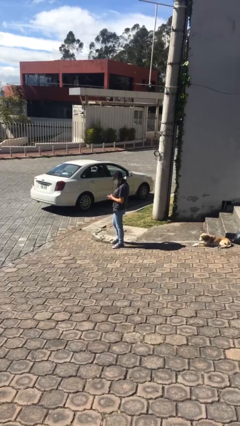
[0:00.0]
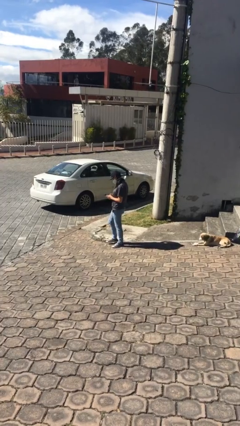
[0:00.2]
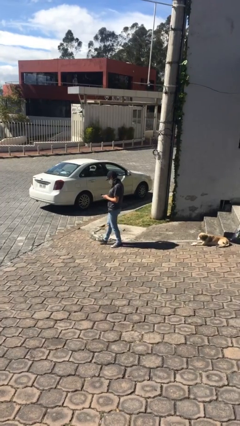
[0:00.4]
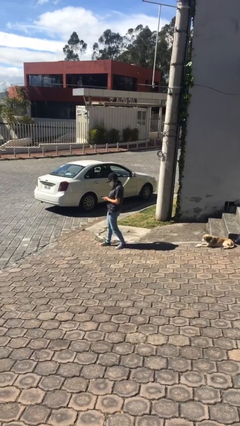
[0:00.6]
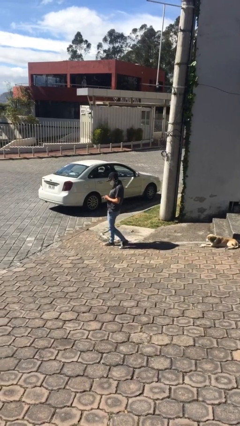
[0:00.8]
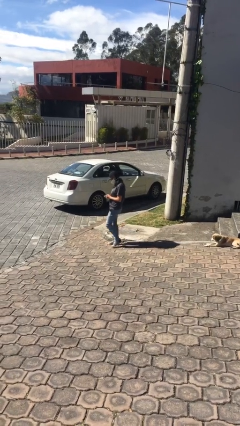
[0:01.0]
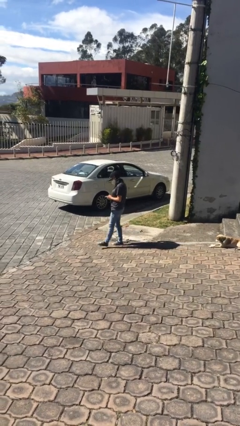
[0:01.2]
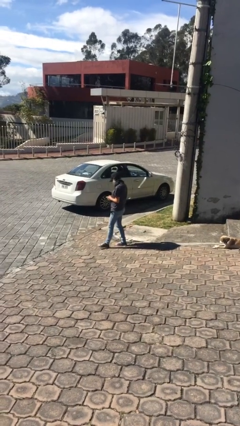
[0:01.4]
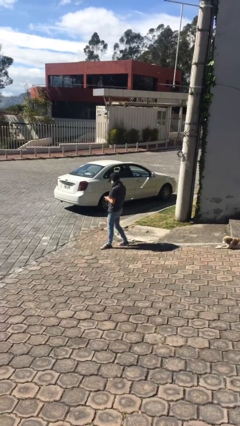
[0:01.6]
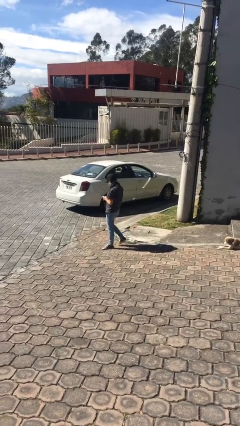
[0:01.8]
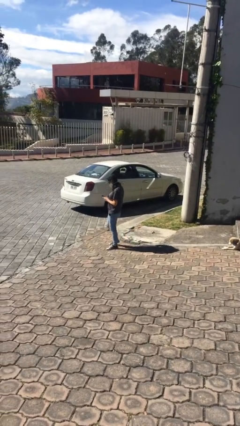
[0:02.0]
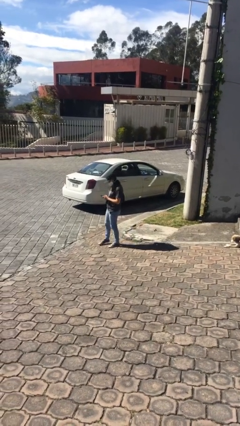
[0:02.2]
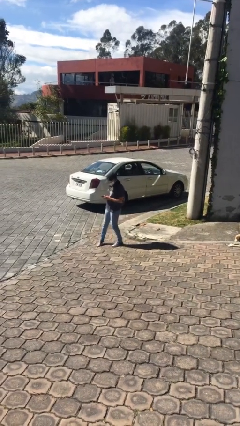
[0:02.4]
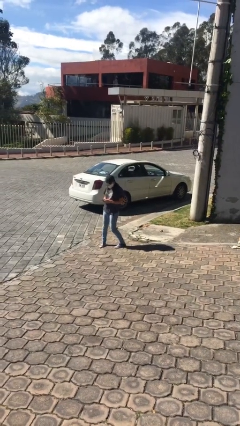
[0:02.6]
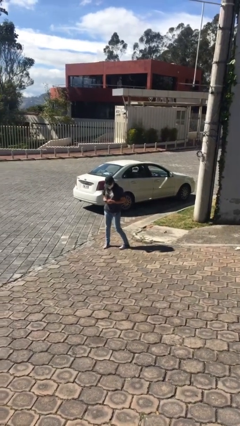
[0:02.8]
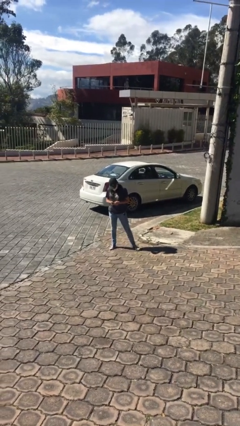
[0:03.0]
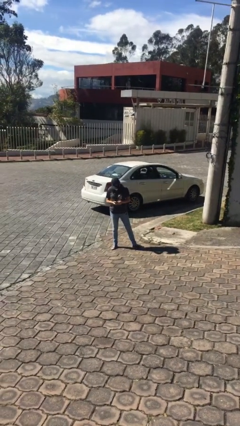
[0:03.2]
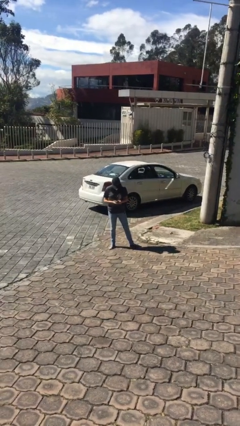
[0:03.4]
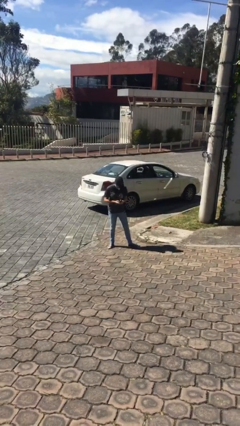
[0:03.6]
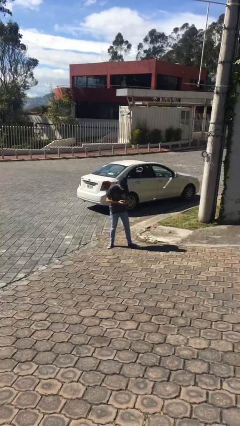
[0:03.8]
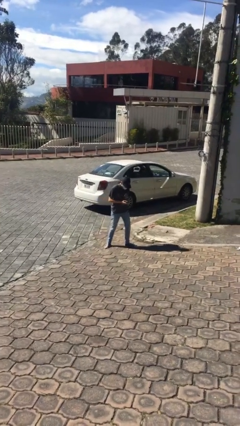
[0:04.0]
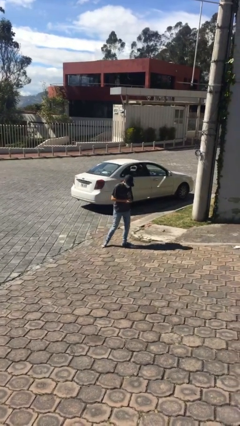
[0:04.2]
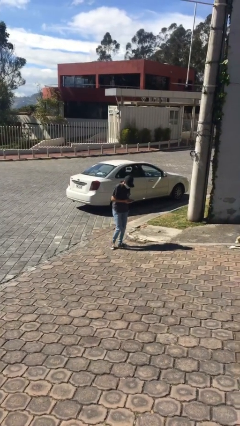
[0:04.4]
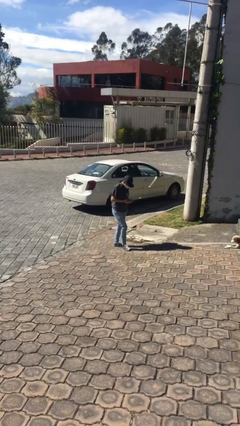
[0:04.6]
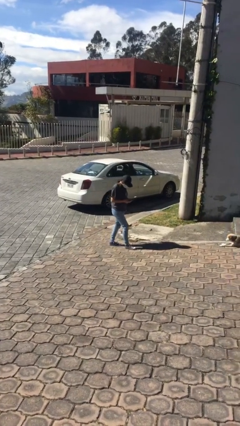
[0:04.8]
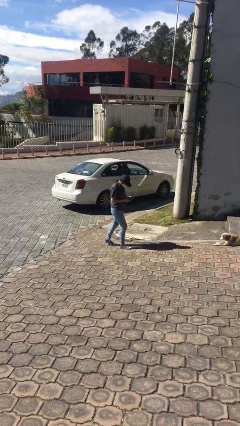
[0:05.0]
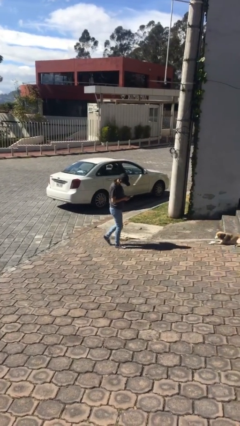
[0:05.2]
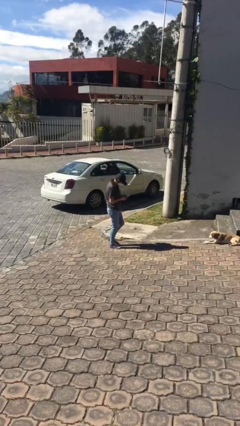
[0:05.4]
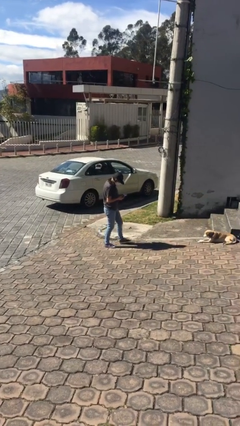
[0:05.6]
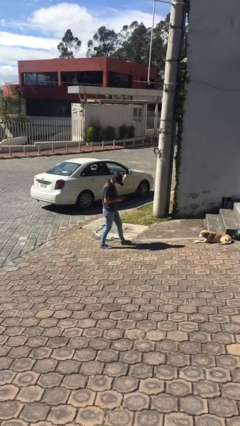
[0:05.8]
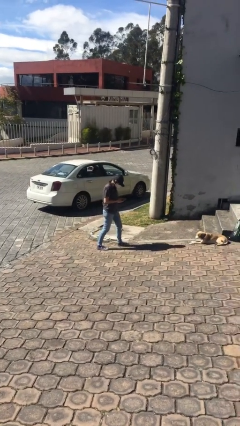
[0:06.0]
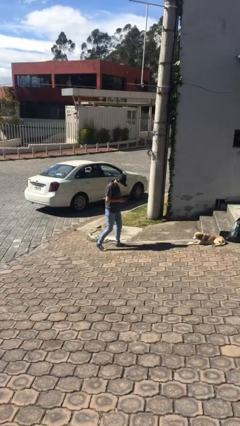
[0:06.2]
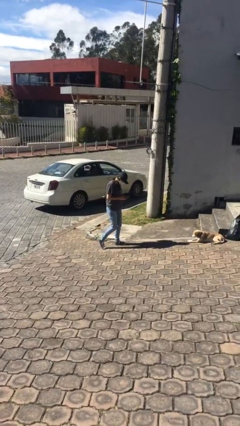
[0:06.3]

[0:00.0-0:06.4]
person texts on phone

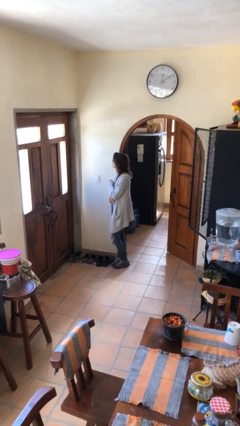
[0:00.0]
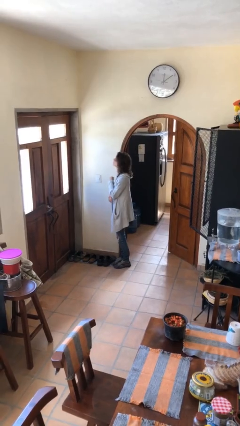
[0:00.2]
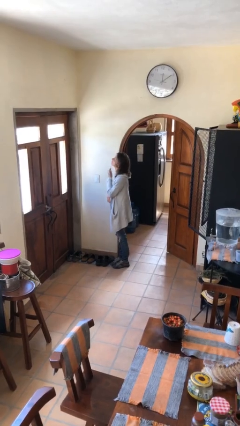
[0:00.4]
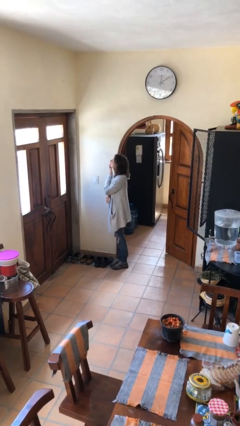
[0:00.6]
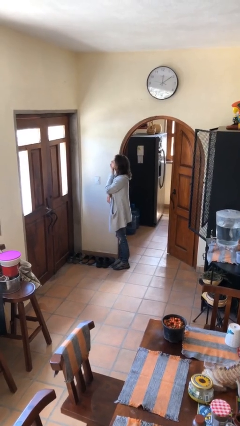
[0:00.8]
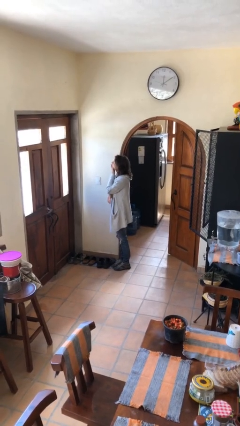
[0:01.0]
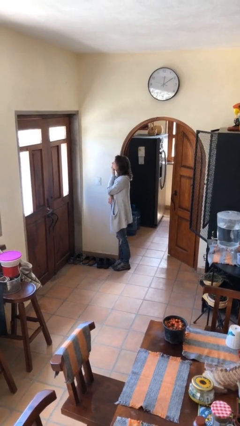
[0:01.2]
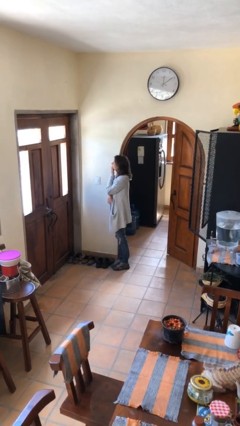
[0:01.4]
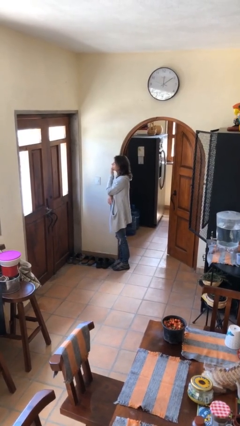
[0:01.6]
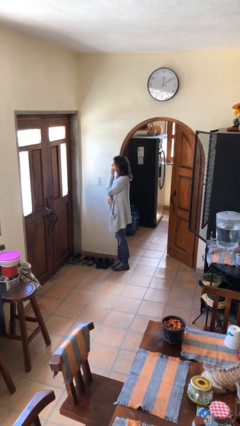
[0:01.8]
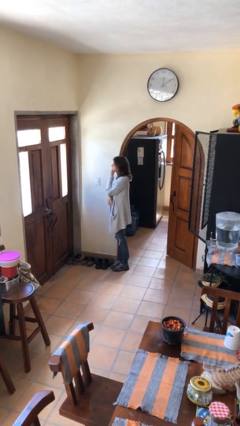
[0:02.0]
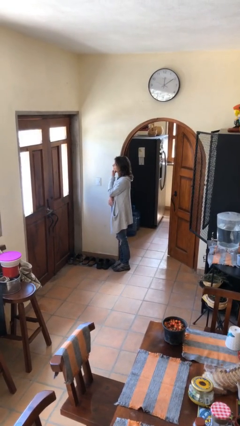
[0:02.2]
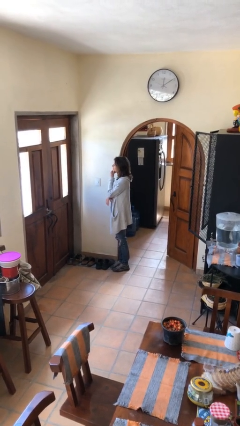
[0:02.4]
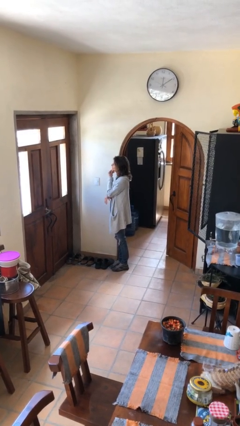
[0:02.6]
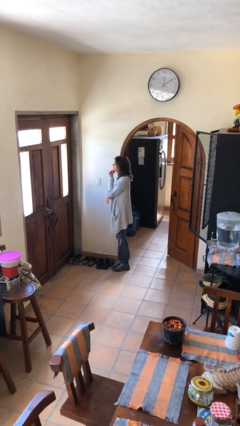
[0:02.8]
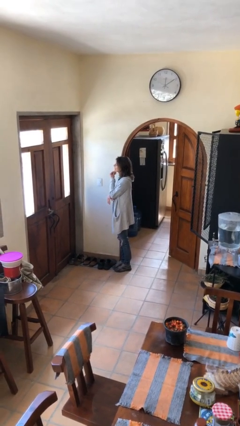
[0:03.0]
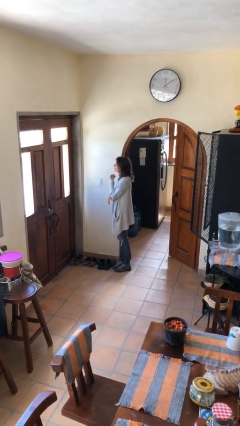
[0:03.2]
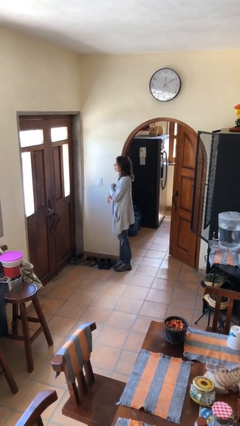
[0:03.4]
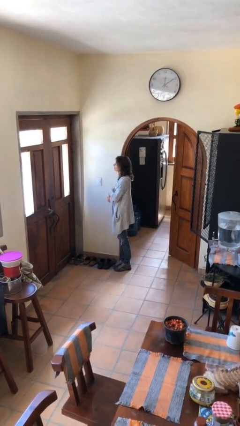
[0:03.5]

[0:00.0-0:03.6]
person strokes chin

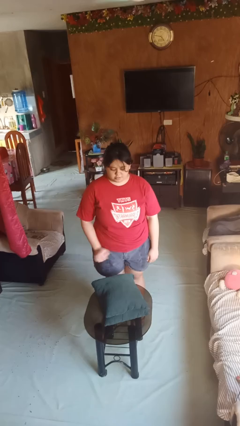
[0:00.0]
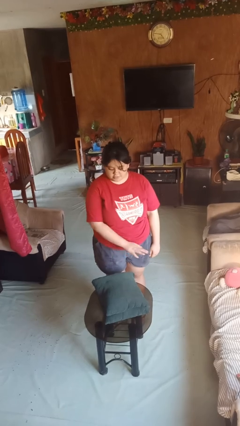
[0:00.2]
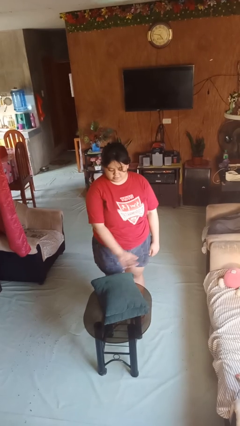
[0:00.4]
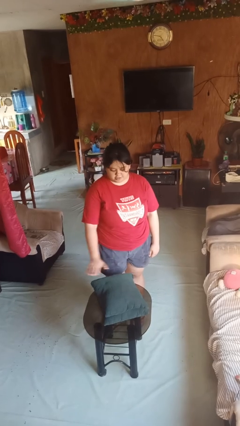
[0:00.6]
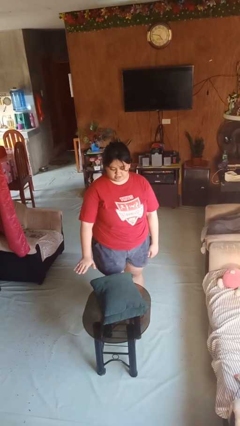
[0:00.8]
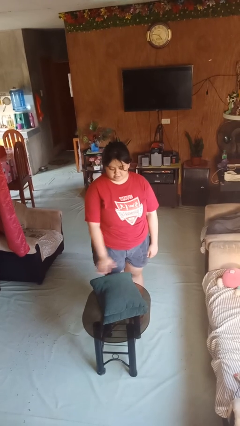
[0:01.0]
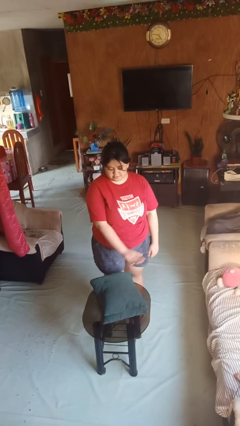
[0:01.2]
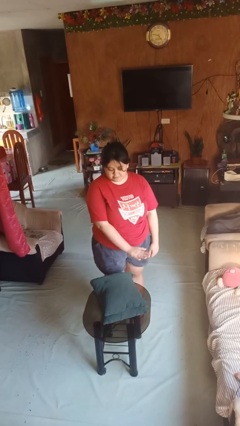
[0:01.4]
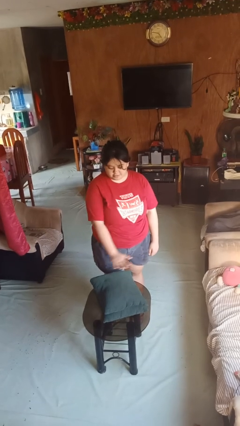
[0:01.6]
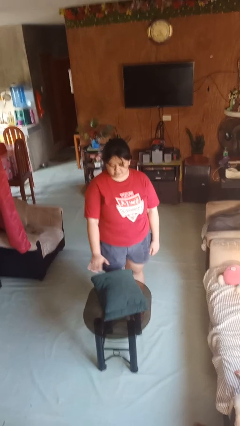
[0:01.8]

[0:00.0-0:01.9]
person waves hand over object

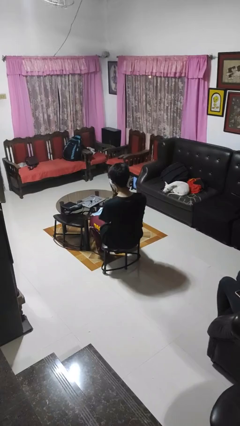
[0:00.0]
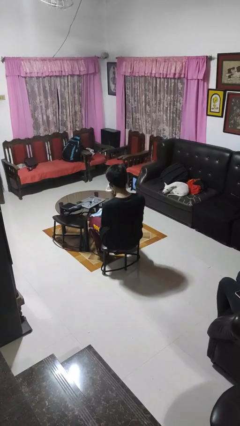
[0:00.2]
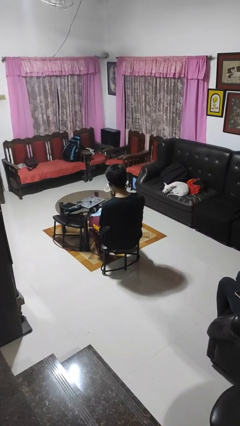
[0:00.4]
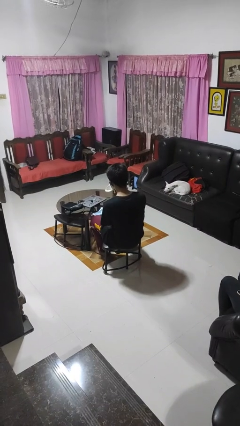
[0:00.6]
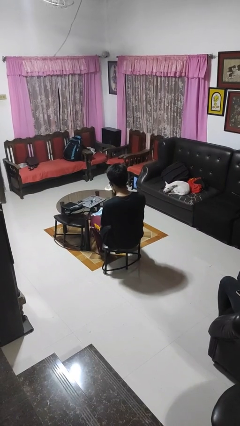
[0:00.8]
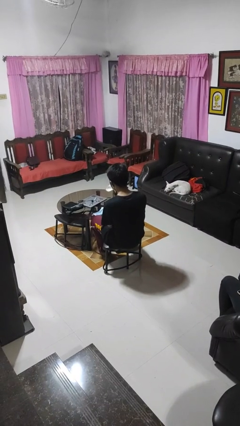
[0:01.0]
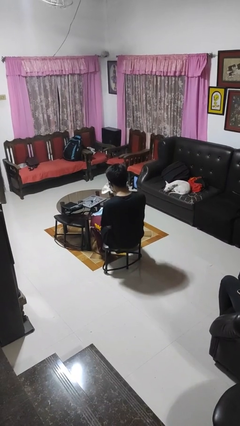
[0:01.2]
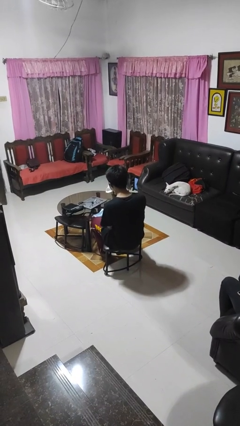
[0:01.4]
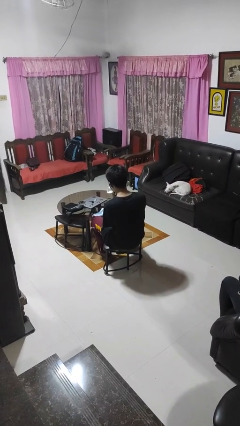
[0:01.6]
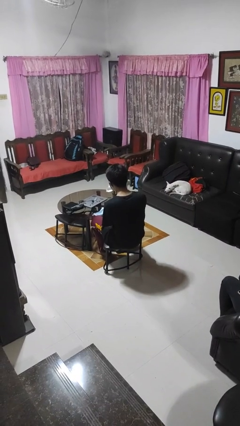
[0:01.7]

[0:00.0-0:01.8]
person wipes mouth with napkin

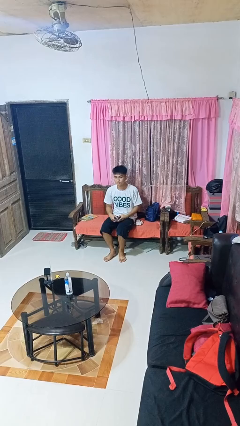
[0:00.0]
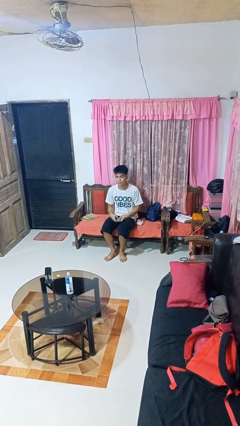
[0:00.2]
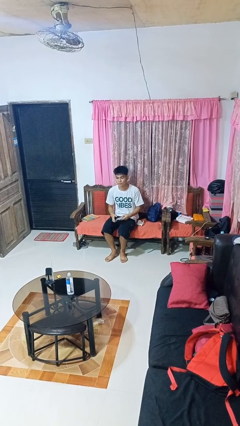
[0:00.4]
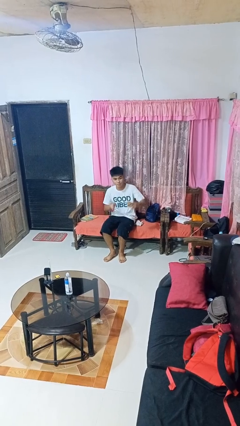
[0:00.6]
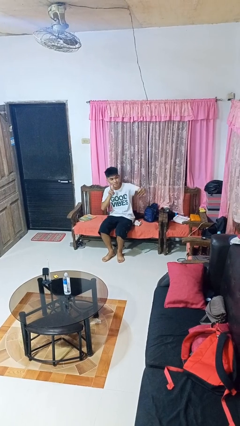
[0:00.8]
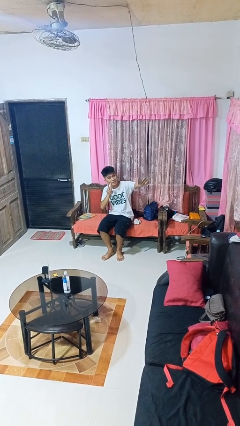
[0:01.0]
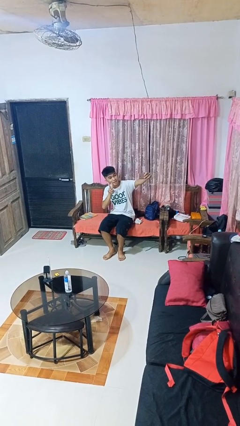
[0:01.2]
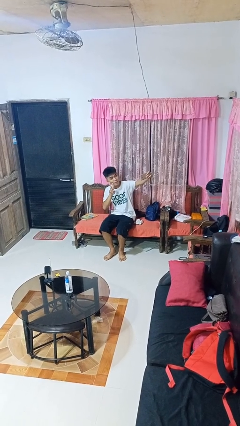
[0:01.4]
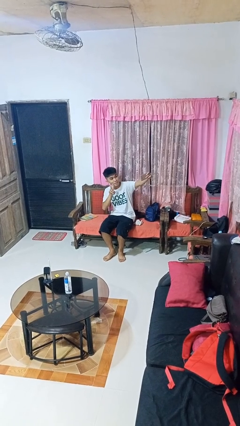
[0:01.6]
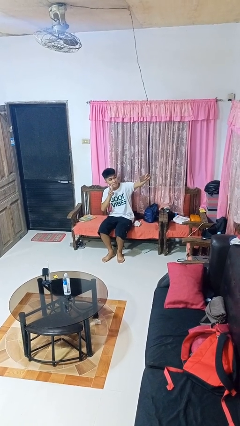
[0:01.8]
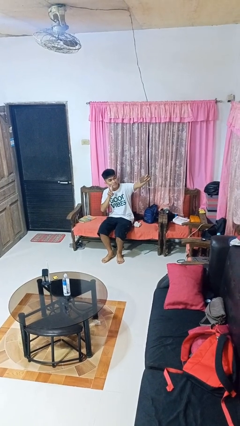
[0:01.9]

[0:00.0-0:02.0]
person takes selfie

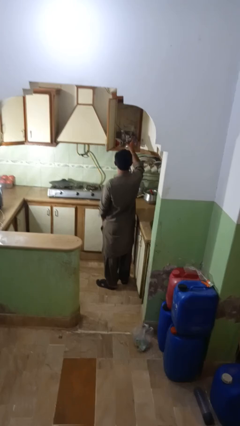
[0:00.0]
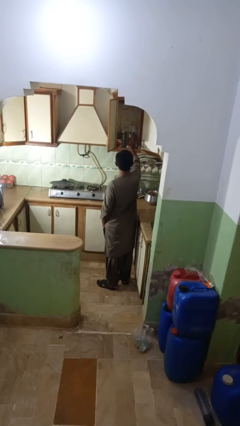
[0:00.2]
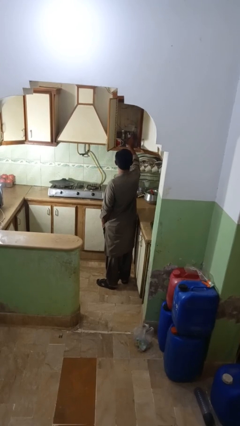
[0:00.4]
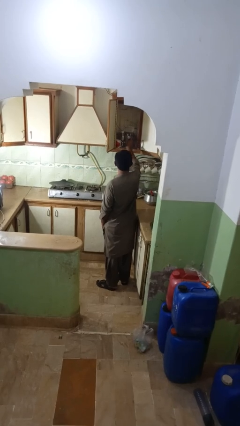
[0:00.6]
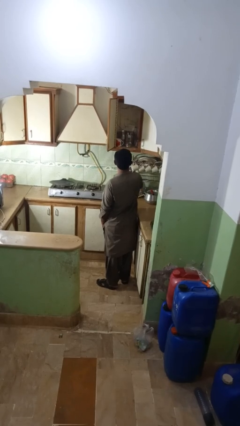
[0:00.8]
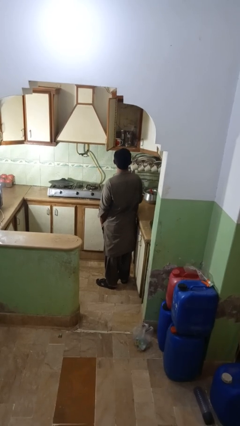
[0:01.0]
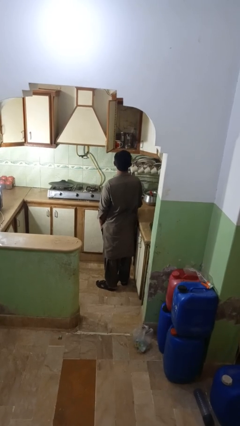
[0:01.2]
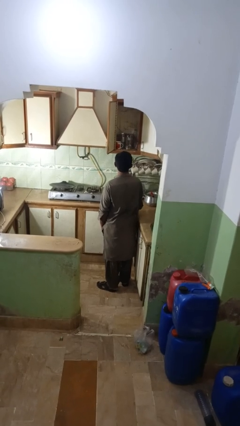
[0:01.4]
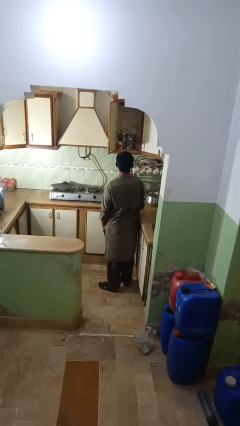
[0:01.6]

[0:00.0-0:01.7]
person puts object into kitchen drawer
